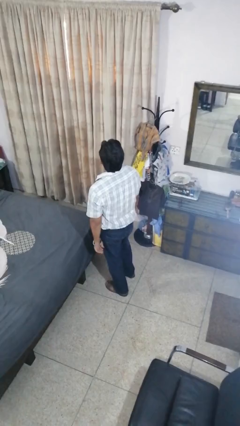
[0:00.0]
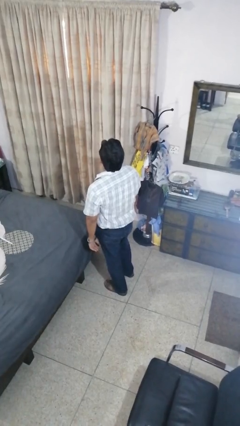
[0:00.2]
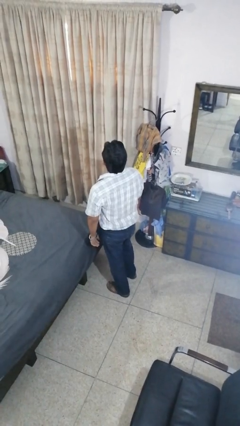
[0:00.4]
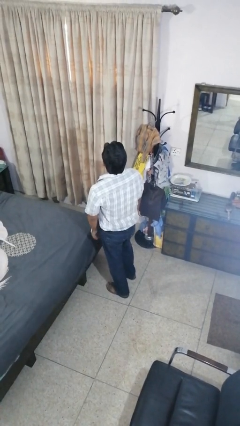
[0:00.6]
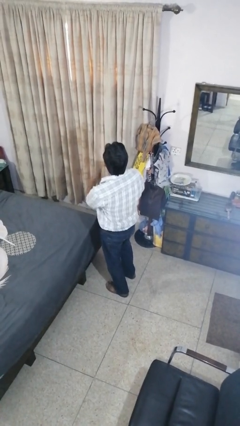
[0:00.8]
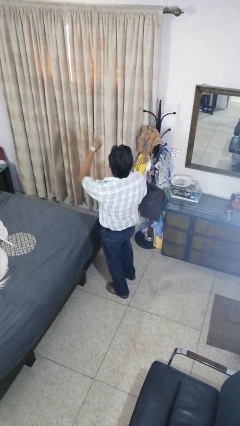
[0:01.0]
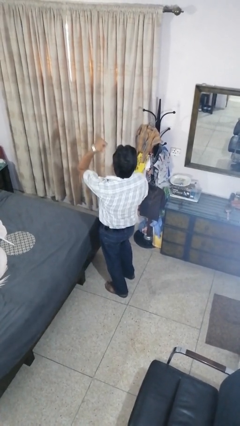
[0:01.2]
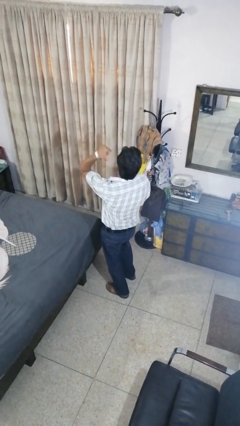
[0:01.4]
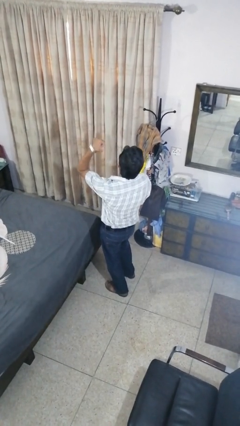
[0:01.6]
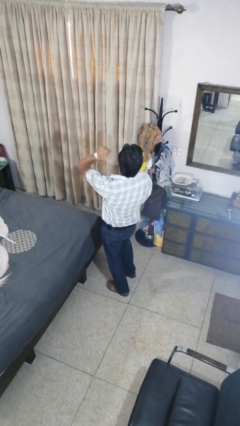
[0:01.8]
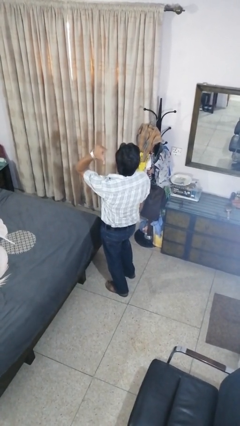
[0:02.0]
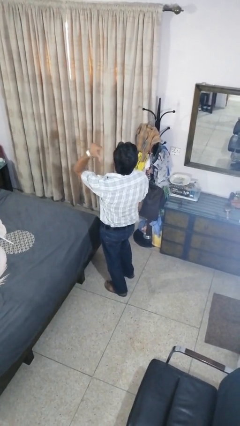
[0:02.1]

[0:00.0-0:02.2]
person gestures behind me

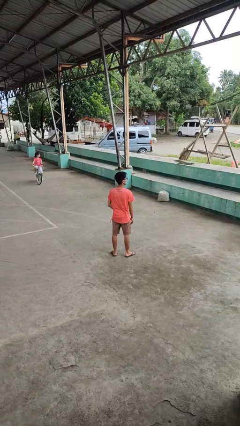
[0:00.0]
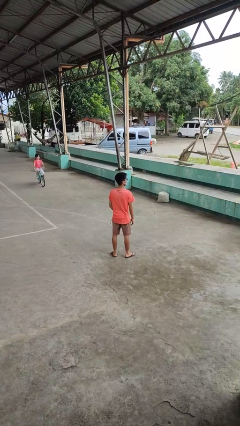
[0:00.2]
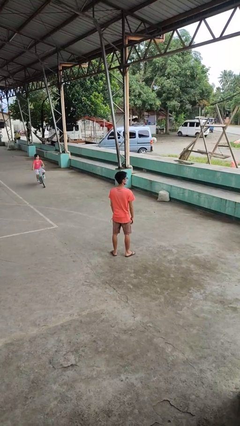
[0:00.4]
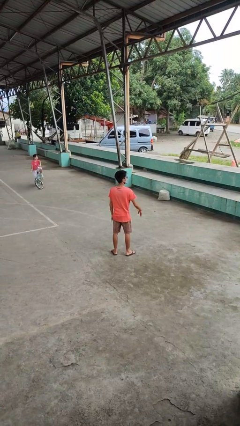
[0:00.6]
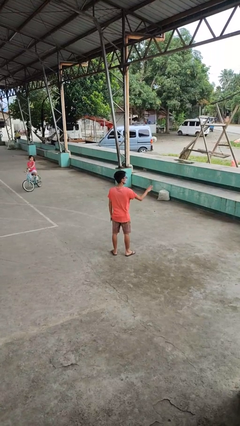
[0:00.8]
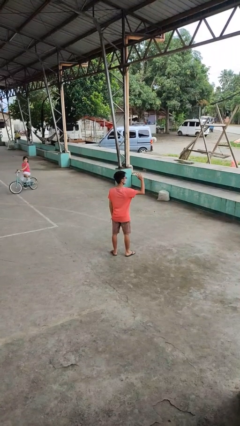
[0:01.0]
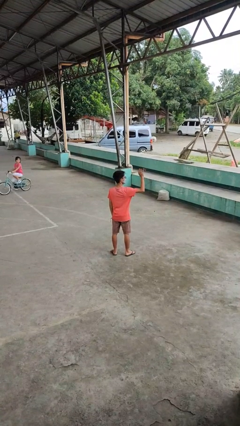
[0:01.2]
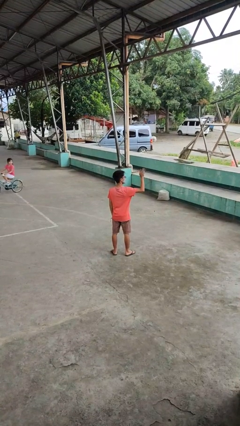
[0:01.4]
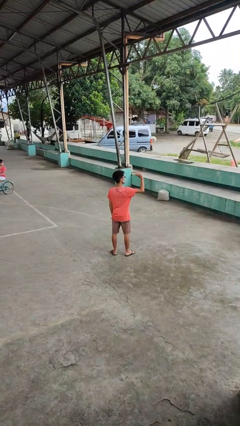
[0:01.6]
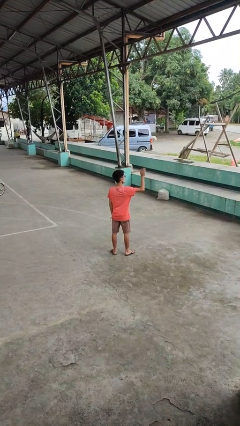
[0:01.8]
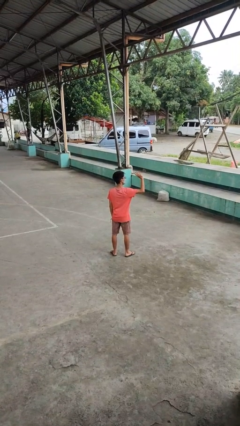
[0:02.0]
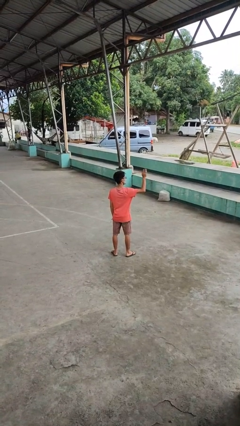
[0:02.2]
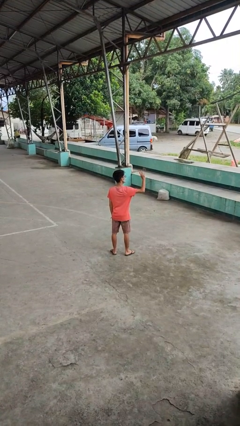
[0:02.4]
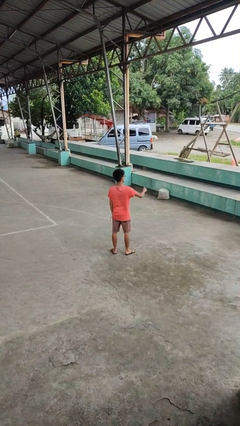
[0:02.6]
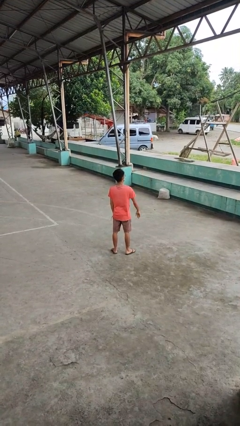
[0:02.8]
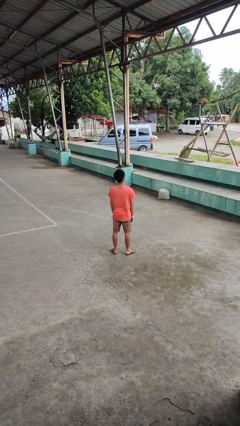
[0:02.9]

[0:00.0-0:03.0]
person waves at person

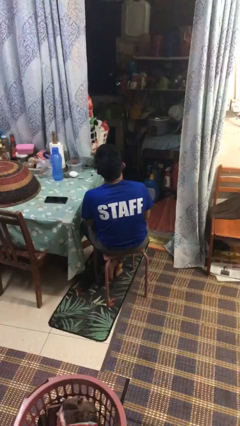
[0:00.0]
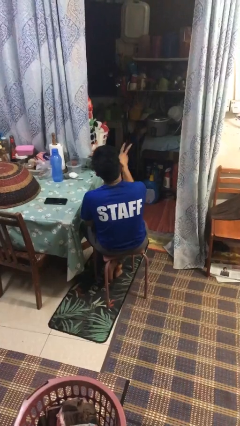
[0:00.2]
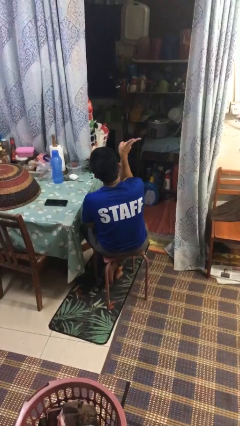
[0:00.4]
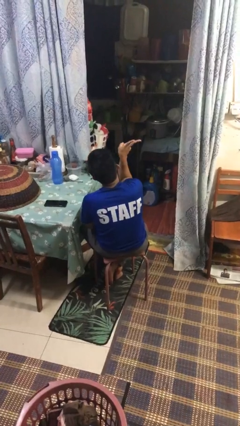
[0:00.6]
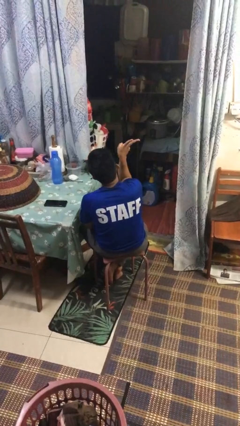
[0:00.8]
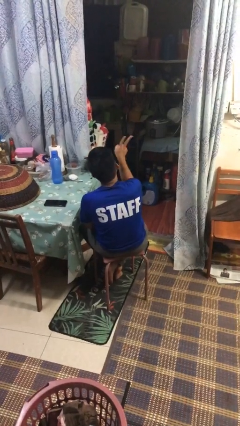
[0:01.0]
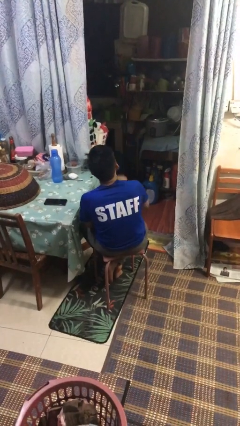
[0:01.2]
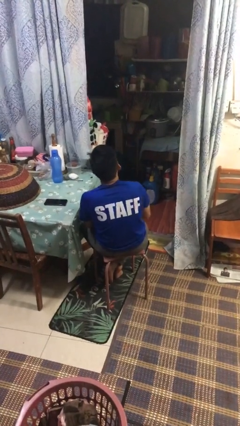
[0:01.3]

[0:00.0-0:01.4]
person gestures peace

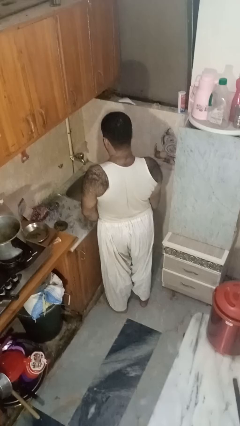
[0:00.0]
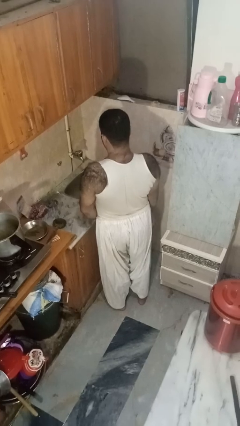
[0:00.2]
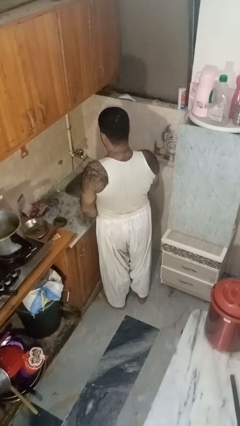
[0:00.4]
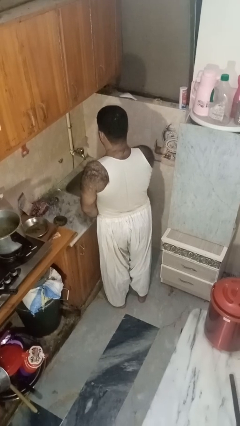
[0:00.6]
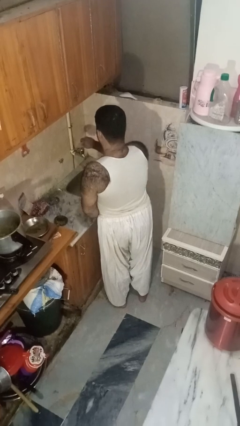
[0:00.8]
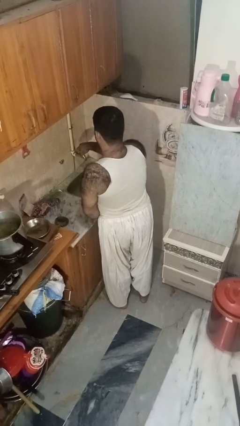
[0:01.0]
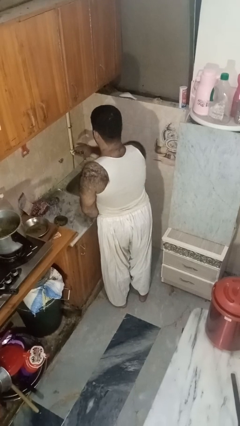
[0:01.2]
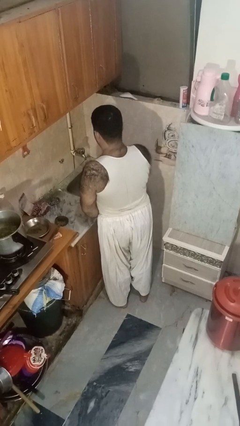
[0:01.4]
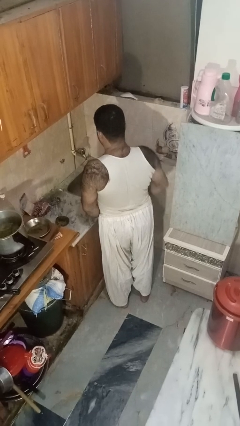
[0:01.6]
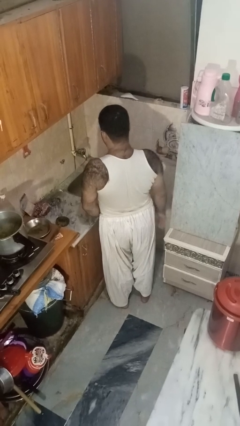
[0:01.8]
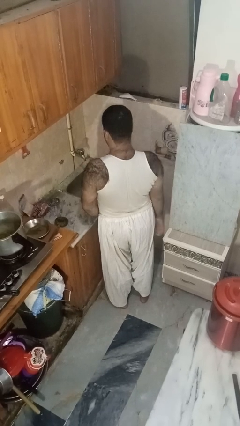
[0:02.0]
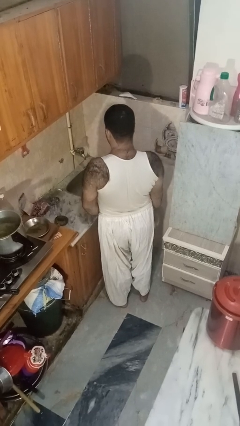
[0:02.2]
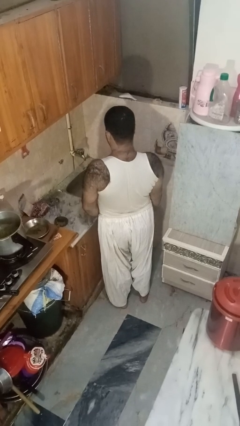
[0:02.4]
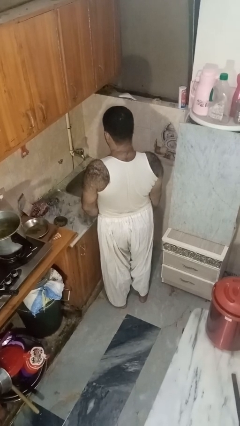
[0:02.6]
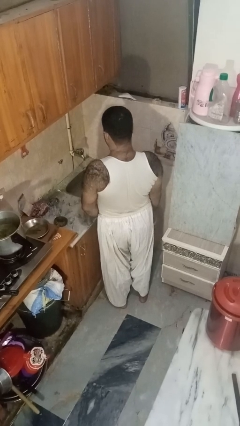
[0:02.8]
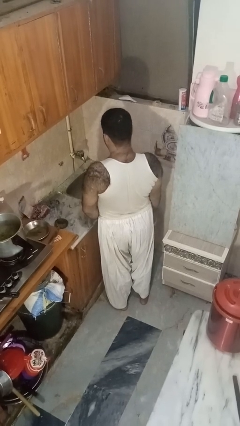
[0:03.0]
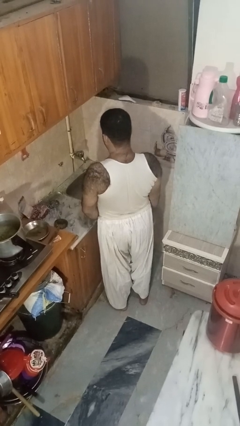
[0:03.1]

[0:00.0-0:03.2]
person turns on faucet

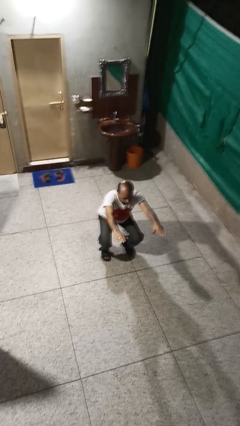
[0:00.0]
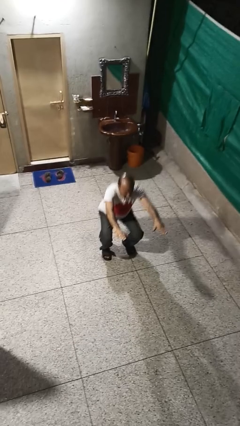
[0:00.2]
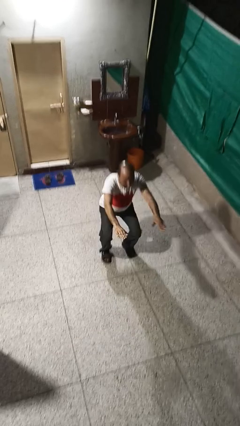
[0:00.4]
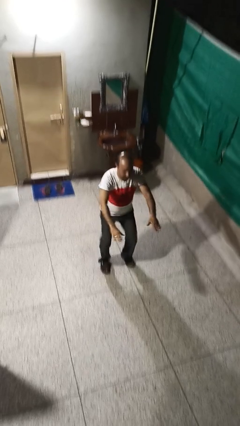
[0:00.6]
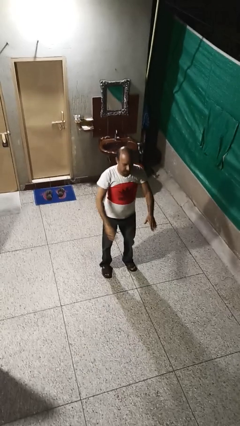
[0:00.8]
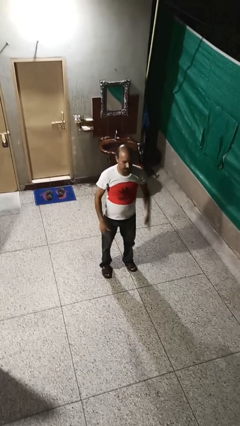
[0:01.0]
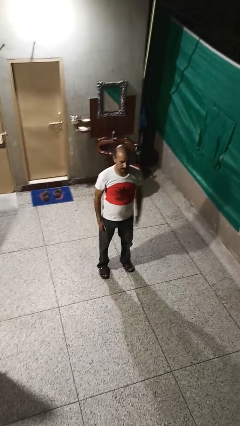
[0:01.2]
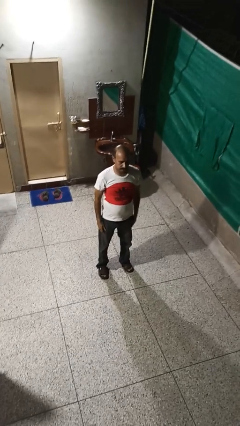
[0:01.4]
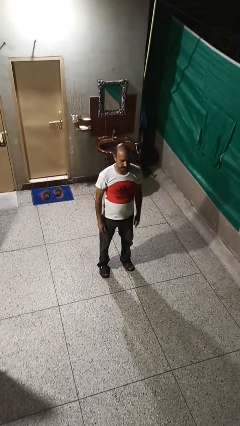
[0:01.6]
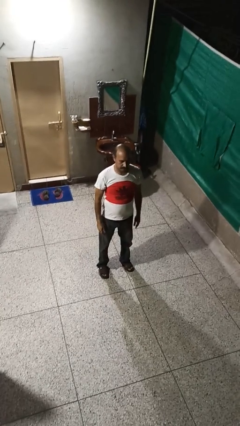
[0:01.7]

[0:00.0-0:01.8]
person stands up

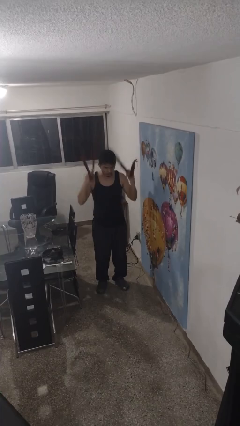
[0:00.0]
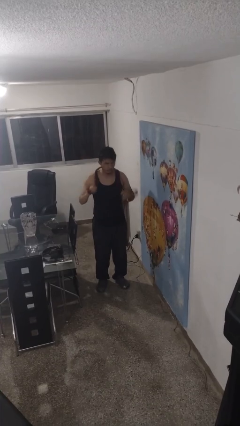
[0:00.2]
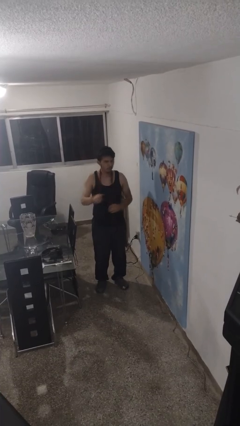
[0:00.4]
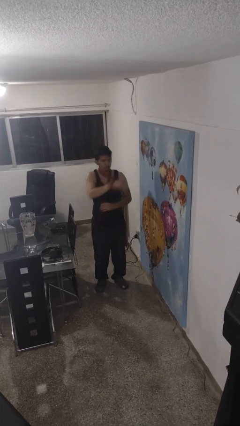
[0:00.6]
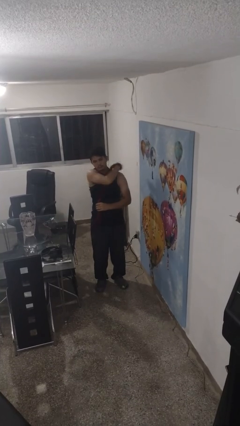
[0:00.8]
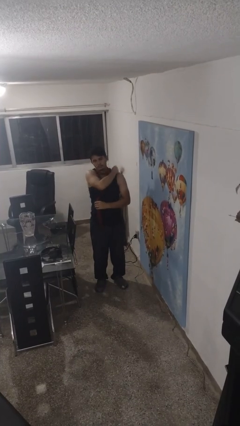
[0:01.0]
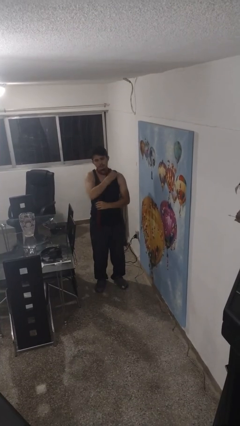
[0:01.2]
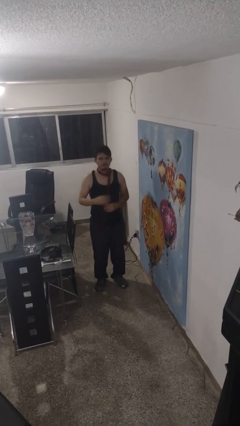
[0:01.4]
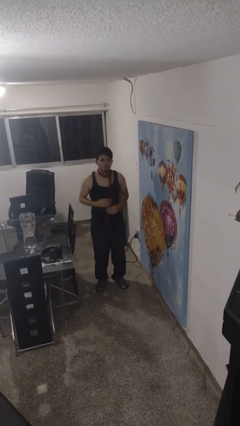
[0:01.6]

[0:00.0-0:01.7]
person puts on scarf

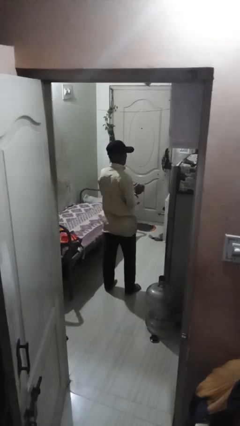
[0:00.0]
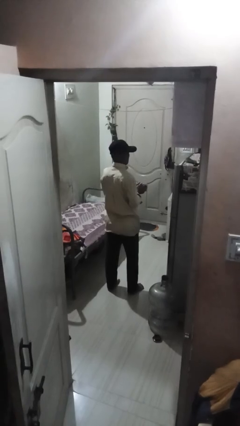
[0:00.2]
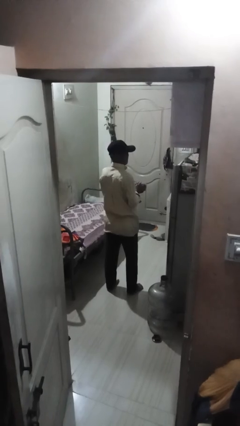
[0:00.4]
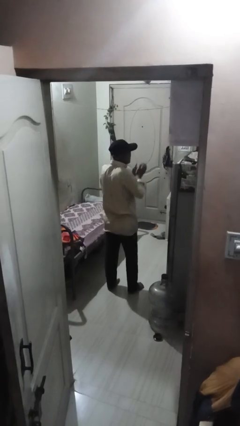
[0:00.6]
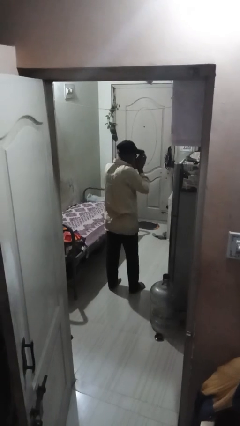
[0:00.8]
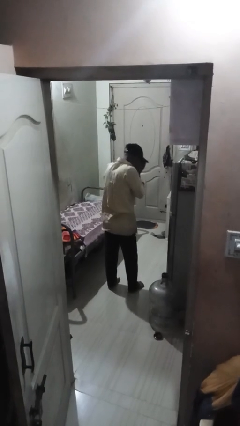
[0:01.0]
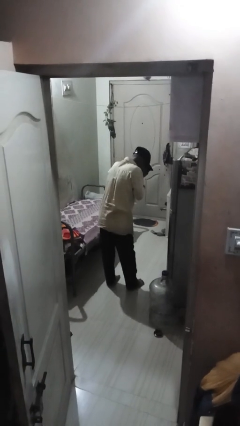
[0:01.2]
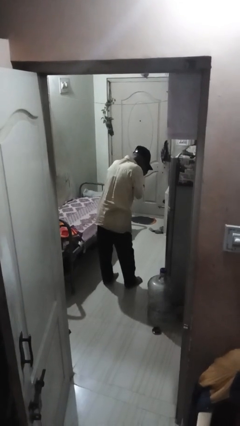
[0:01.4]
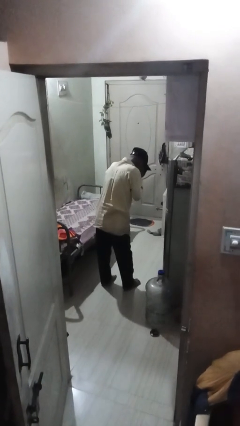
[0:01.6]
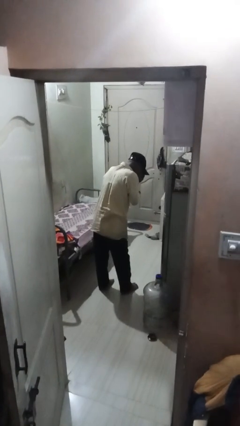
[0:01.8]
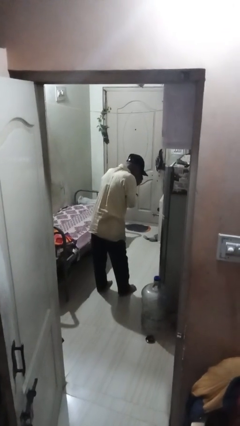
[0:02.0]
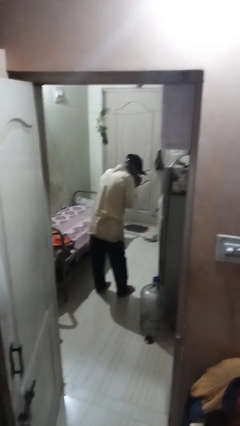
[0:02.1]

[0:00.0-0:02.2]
person sneezes into hand

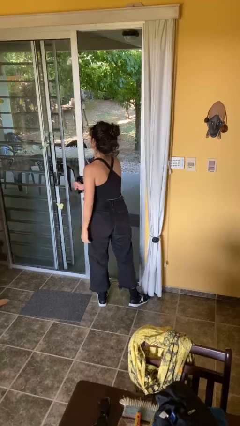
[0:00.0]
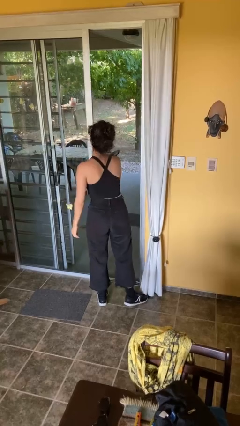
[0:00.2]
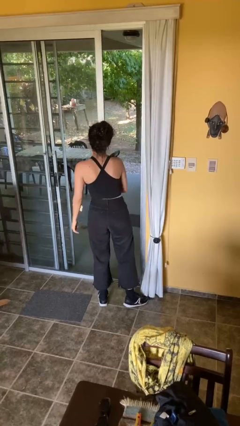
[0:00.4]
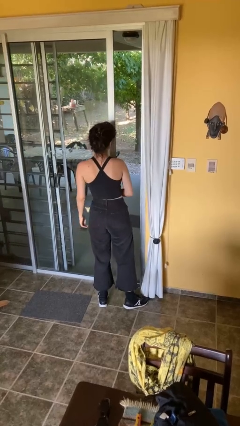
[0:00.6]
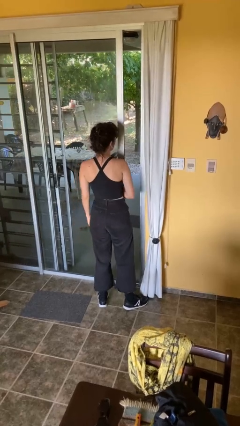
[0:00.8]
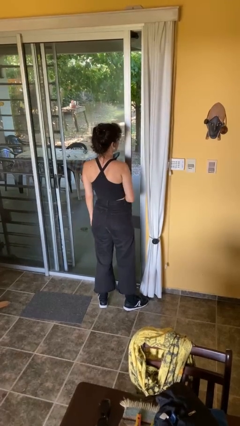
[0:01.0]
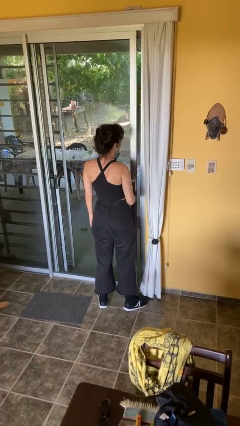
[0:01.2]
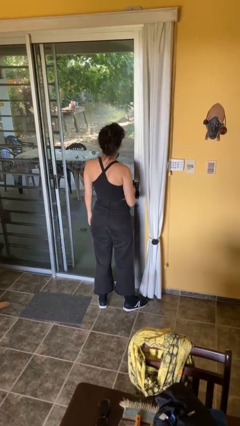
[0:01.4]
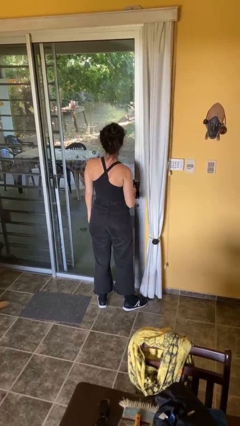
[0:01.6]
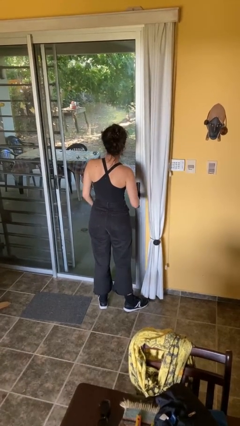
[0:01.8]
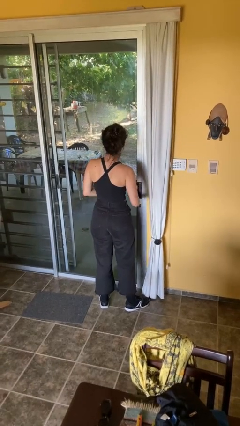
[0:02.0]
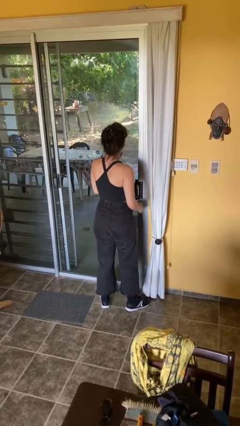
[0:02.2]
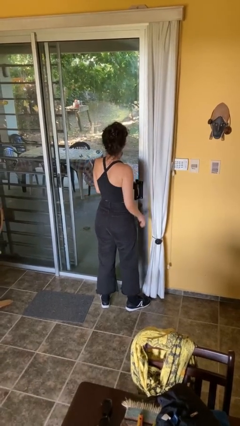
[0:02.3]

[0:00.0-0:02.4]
person closes facility door
